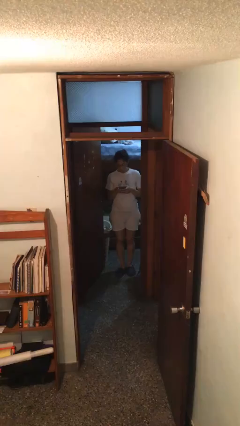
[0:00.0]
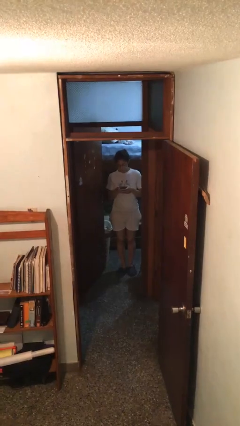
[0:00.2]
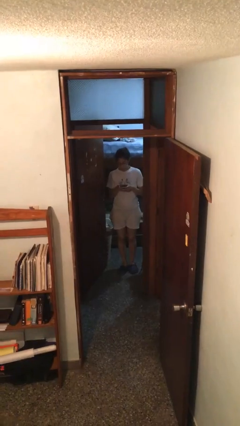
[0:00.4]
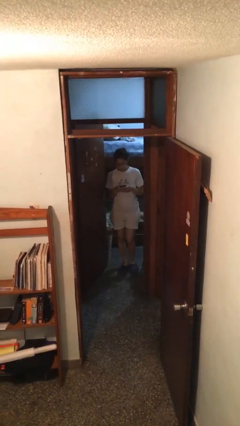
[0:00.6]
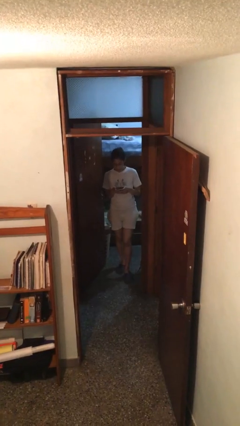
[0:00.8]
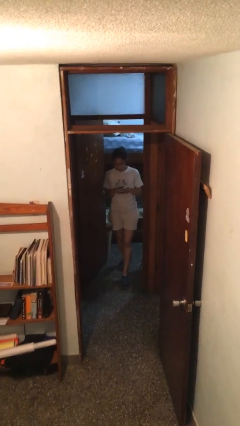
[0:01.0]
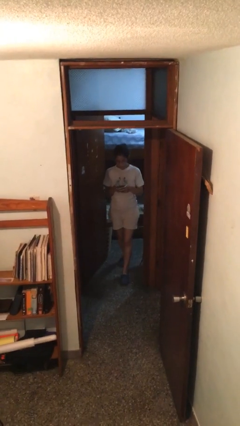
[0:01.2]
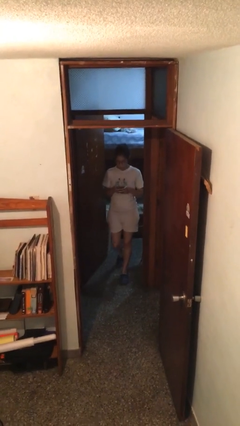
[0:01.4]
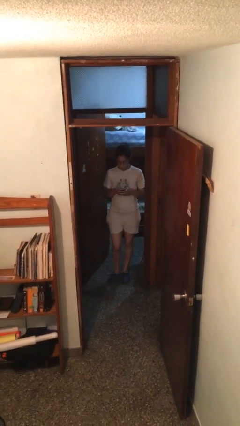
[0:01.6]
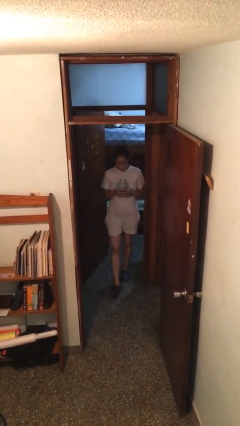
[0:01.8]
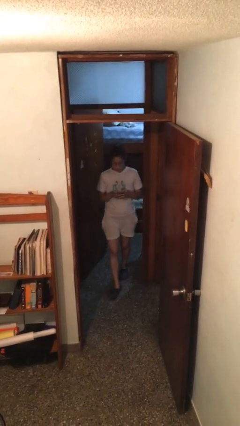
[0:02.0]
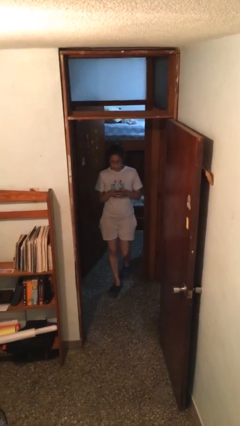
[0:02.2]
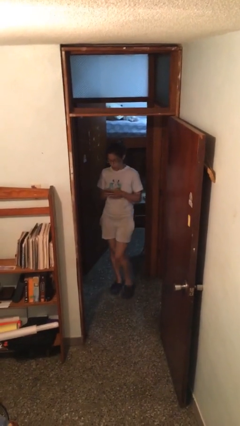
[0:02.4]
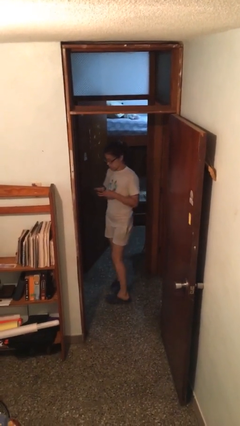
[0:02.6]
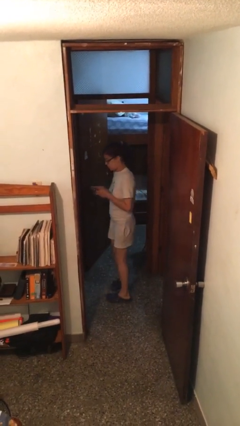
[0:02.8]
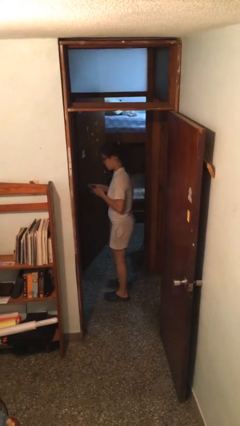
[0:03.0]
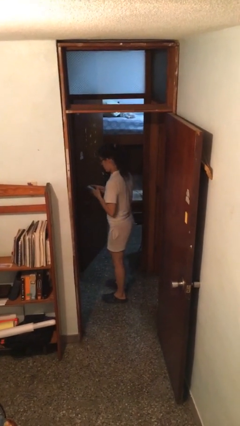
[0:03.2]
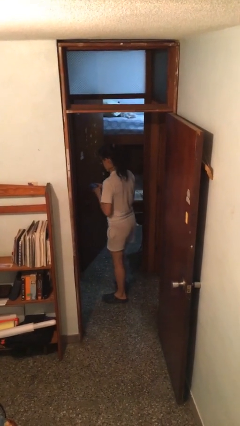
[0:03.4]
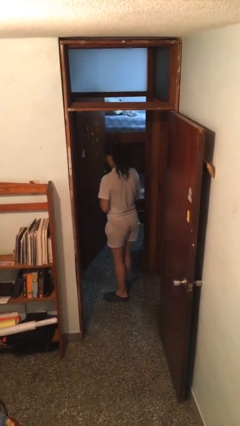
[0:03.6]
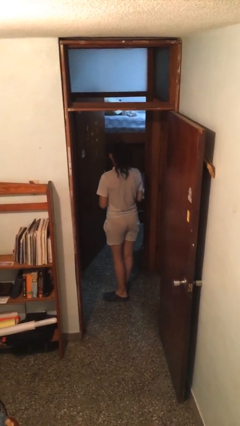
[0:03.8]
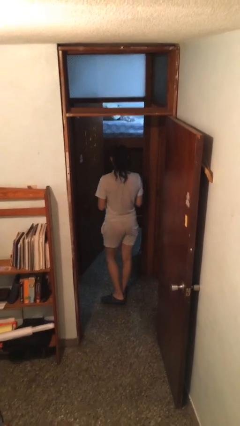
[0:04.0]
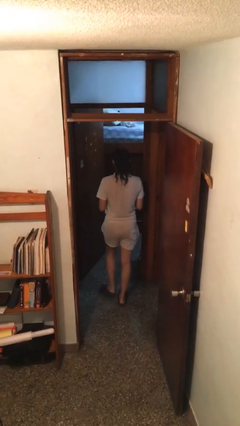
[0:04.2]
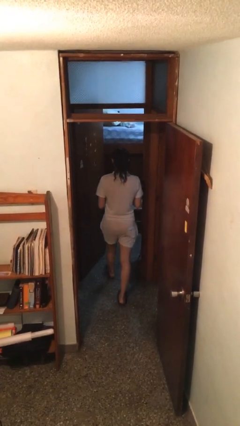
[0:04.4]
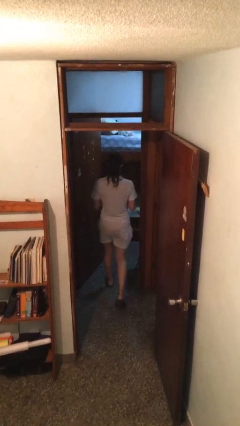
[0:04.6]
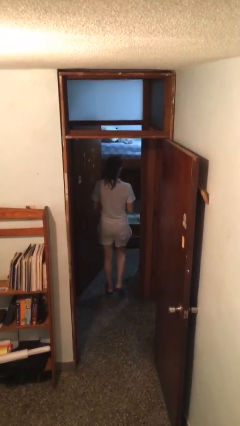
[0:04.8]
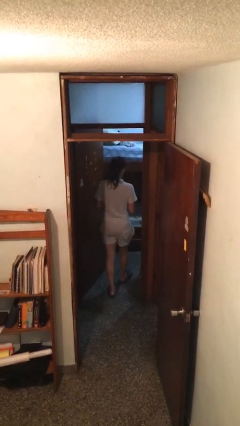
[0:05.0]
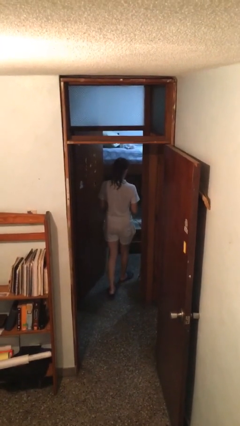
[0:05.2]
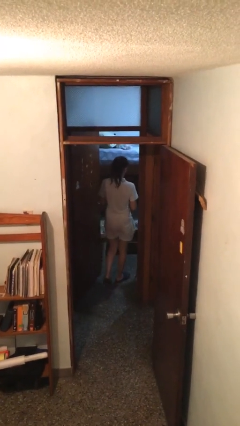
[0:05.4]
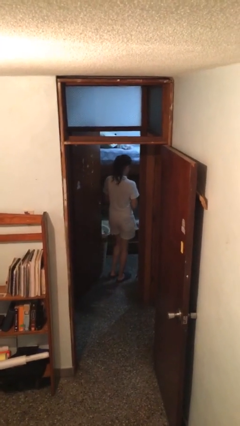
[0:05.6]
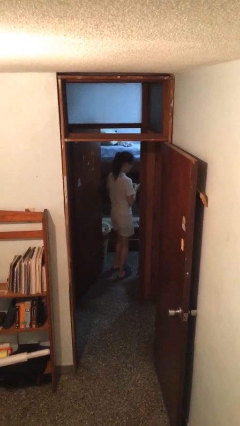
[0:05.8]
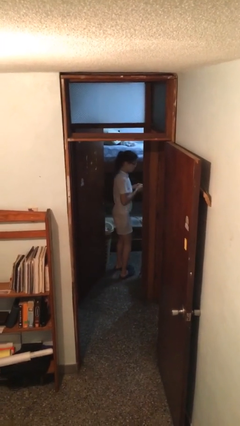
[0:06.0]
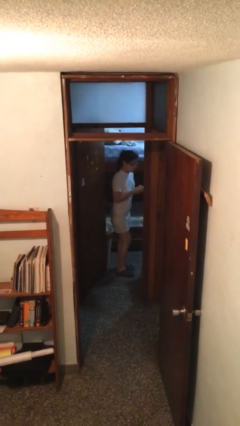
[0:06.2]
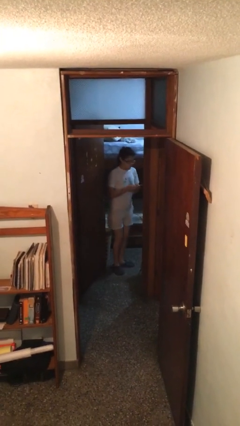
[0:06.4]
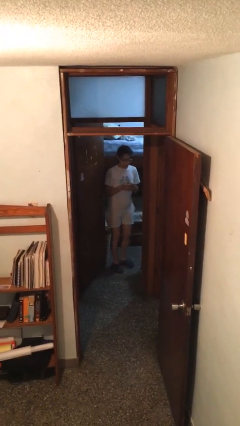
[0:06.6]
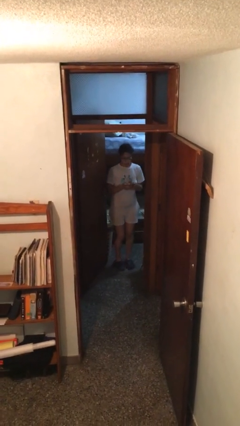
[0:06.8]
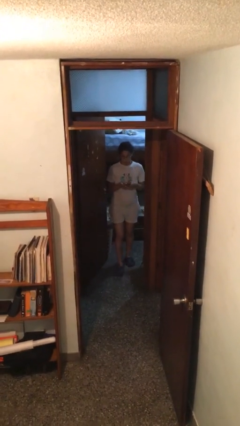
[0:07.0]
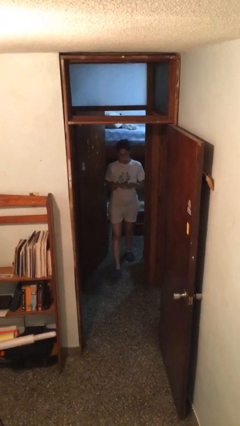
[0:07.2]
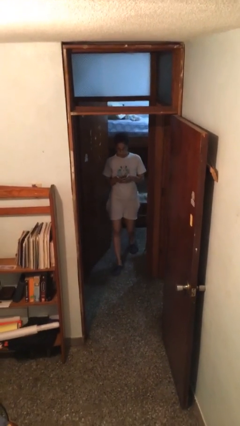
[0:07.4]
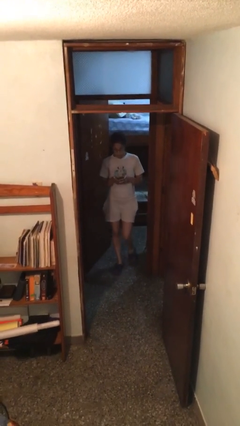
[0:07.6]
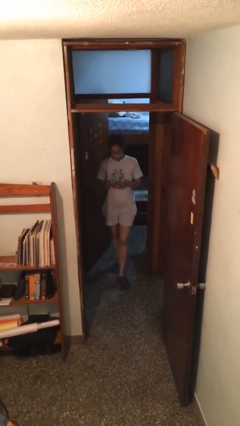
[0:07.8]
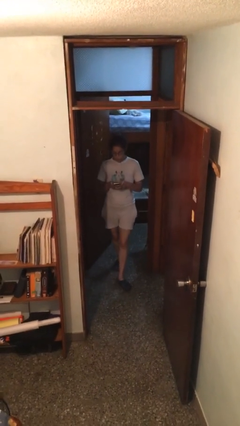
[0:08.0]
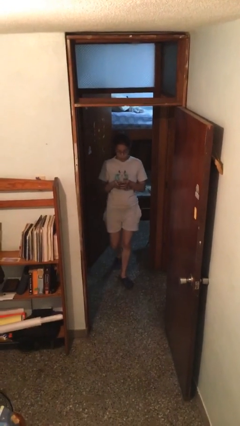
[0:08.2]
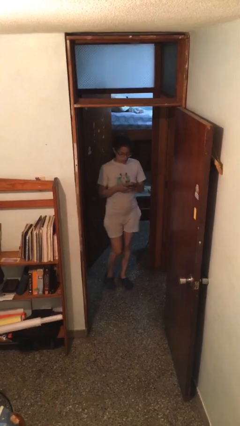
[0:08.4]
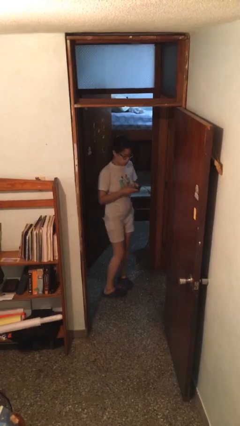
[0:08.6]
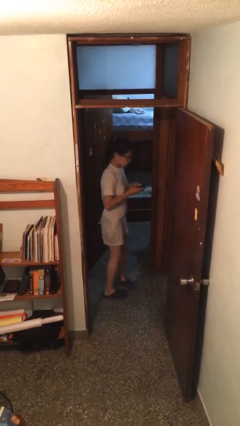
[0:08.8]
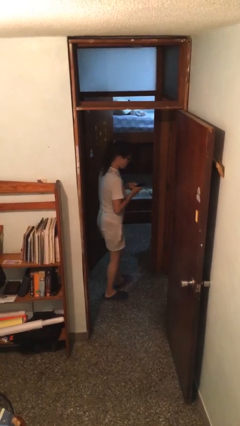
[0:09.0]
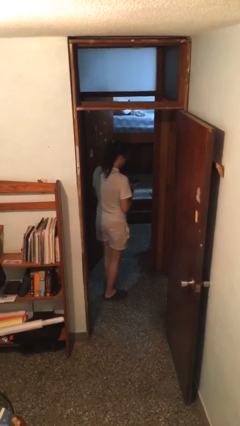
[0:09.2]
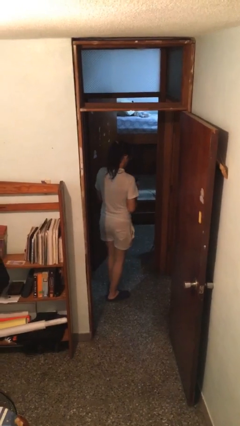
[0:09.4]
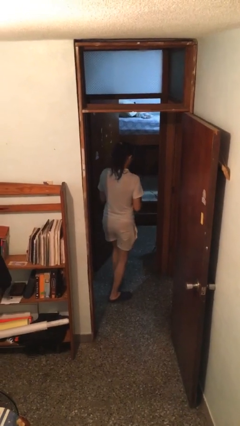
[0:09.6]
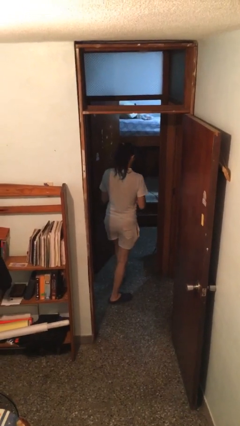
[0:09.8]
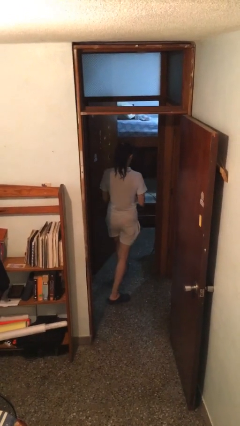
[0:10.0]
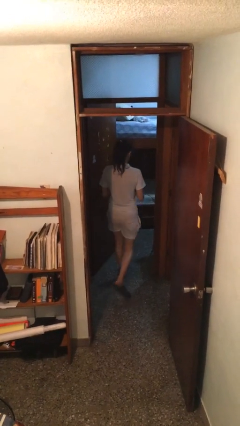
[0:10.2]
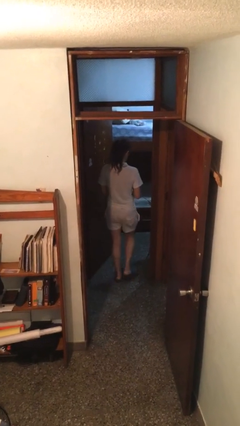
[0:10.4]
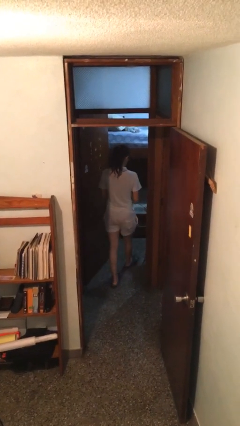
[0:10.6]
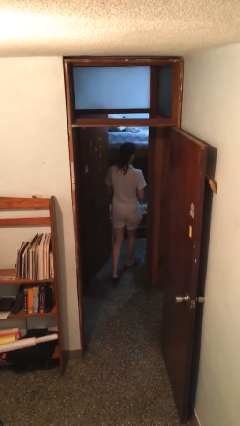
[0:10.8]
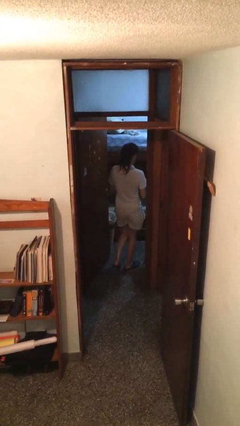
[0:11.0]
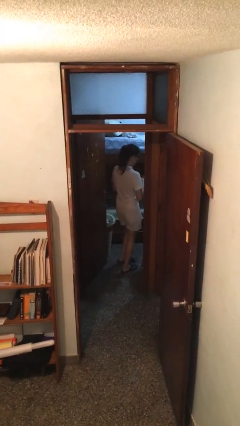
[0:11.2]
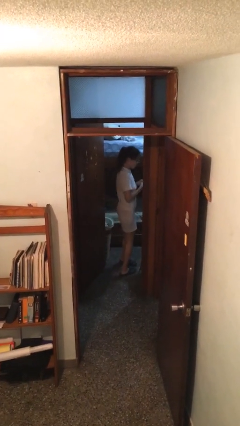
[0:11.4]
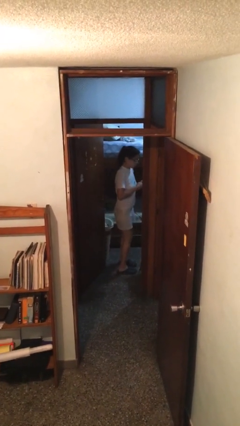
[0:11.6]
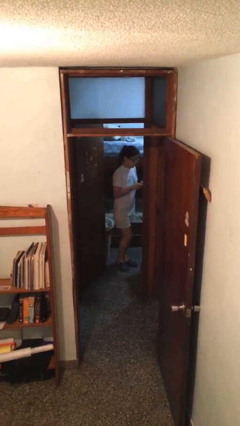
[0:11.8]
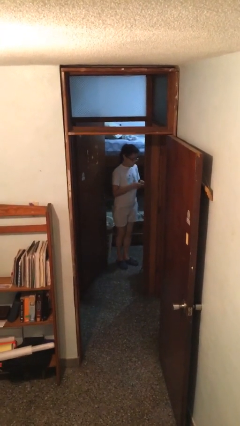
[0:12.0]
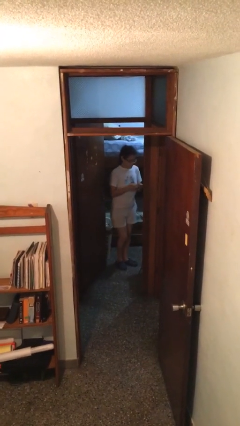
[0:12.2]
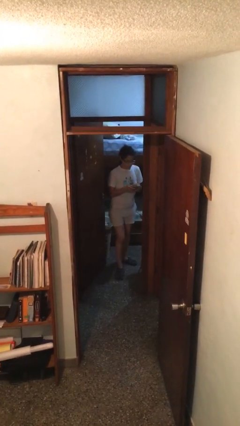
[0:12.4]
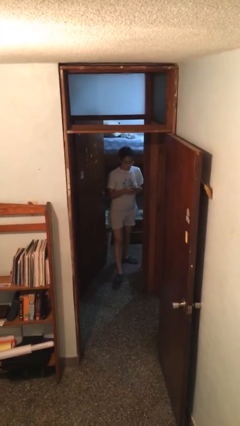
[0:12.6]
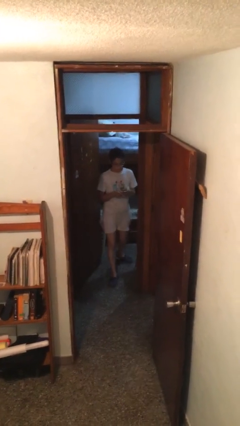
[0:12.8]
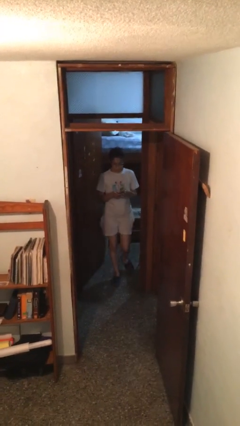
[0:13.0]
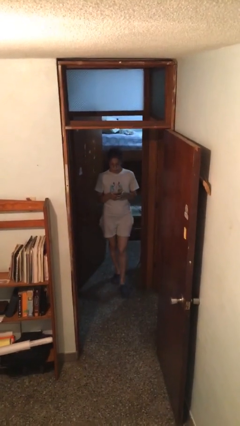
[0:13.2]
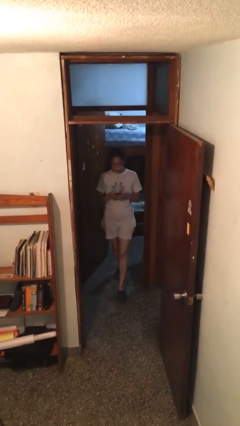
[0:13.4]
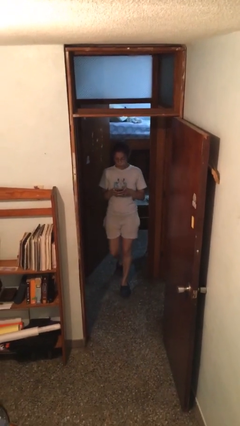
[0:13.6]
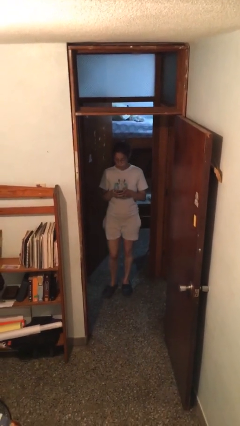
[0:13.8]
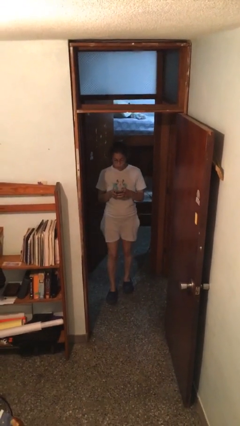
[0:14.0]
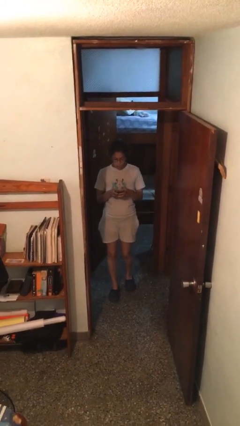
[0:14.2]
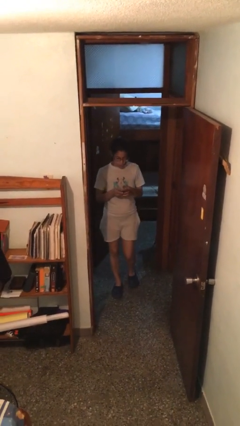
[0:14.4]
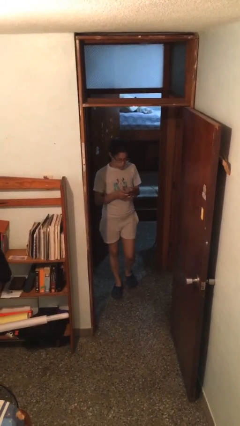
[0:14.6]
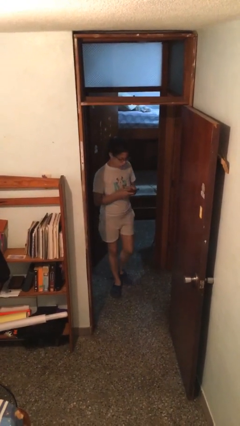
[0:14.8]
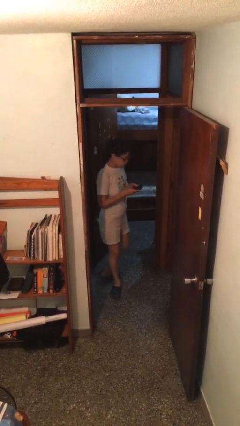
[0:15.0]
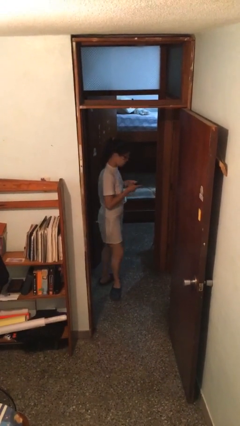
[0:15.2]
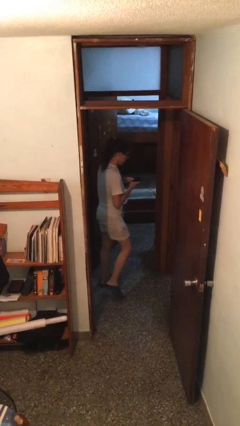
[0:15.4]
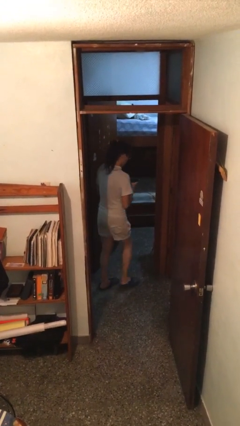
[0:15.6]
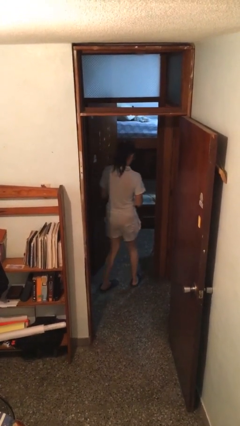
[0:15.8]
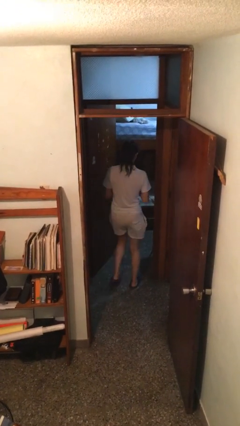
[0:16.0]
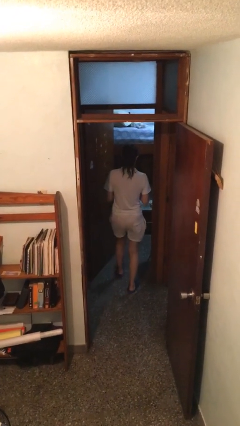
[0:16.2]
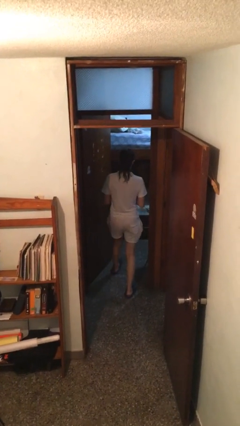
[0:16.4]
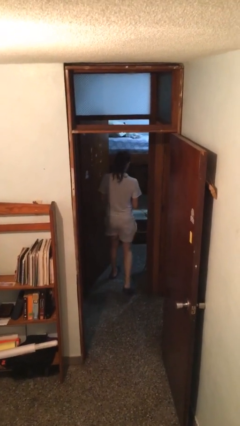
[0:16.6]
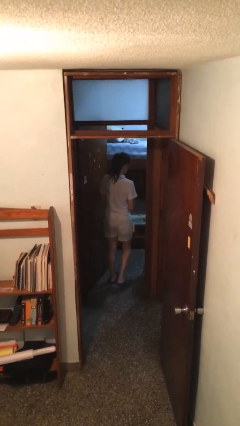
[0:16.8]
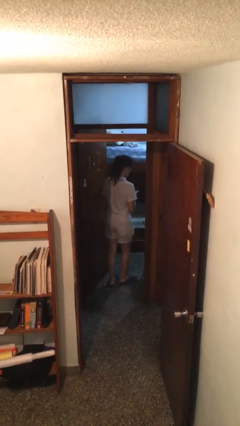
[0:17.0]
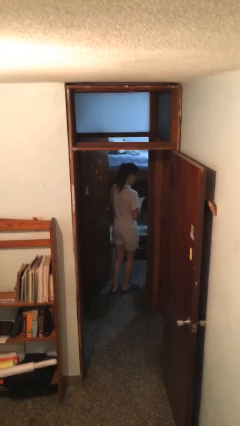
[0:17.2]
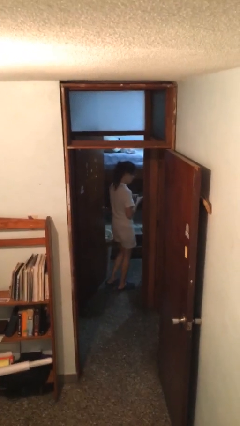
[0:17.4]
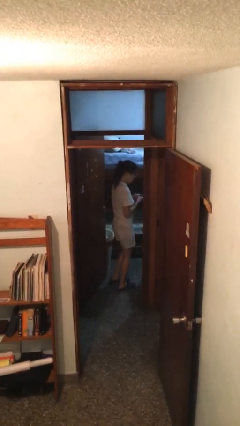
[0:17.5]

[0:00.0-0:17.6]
person texts on phone

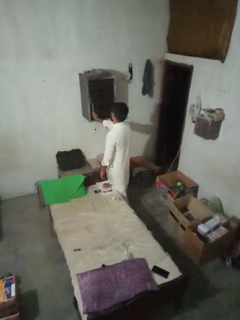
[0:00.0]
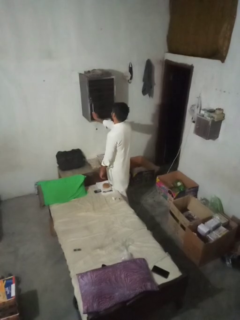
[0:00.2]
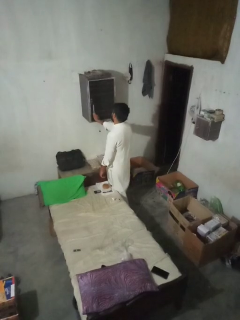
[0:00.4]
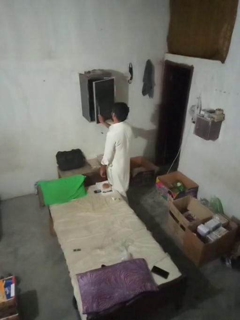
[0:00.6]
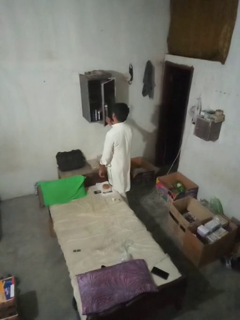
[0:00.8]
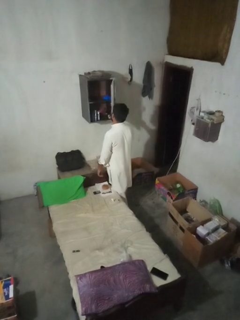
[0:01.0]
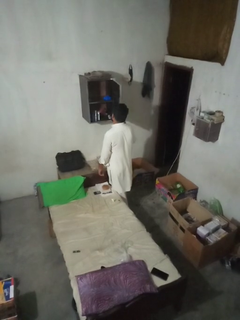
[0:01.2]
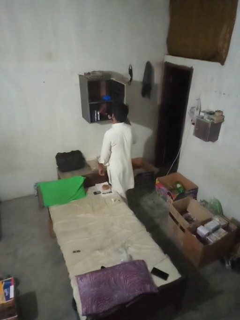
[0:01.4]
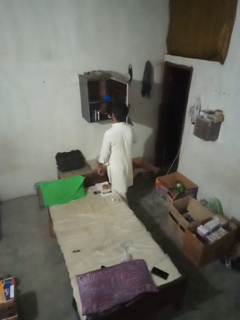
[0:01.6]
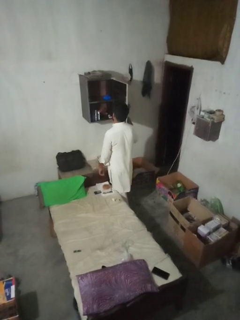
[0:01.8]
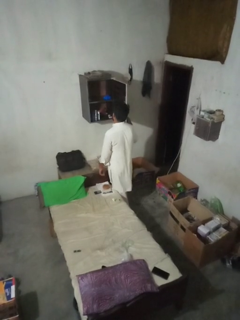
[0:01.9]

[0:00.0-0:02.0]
person opens dresser drawer
